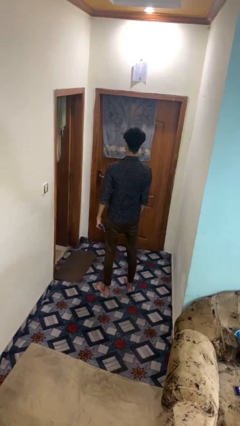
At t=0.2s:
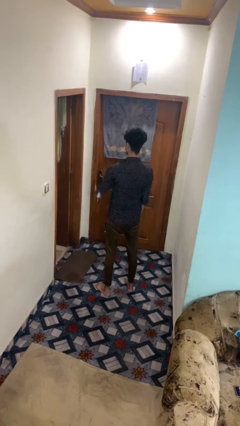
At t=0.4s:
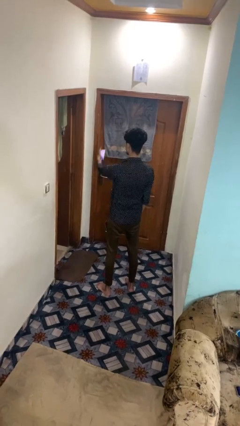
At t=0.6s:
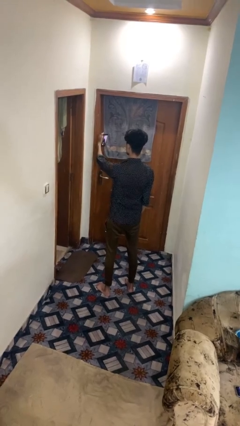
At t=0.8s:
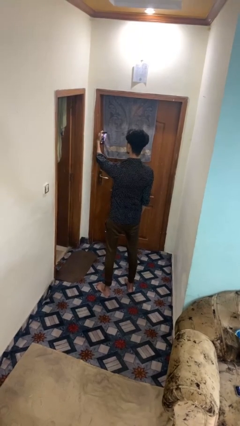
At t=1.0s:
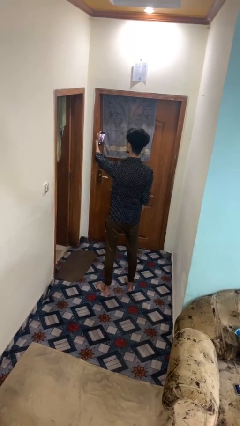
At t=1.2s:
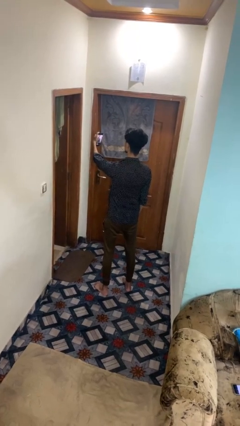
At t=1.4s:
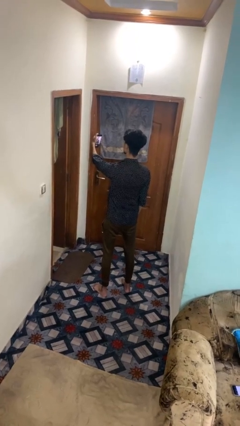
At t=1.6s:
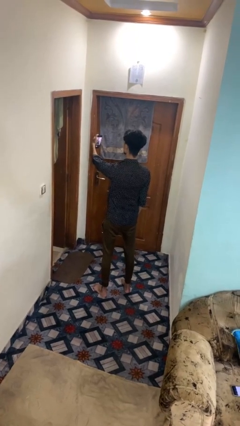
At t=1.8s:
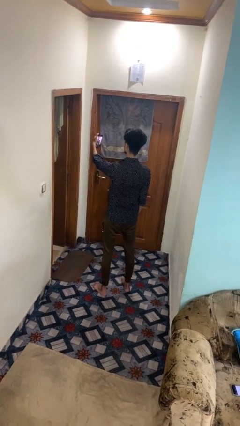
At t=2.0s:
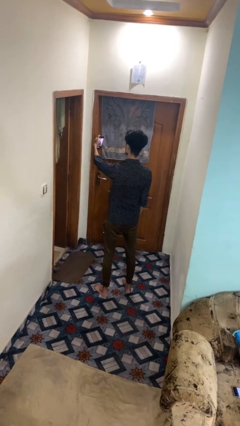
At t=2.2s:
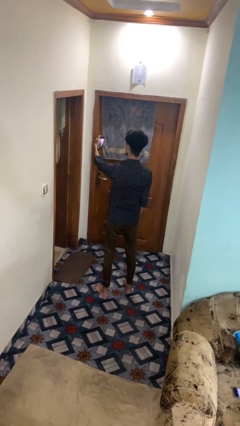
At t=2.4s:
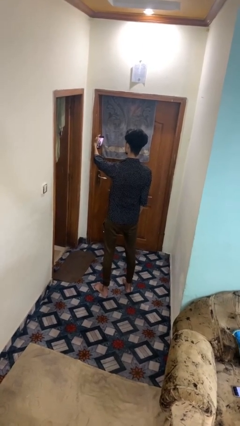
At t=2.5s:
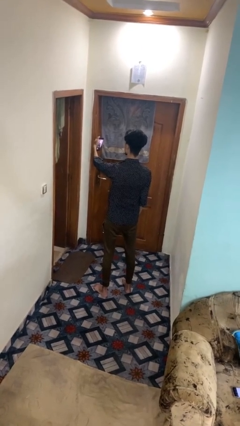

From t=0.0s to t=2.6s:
person takes selfie

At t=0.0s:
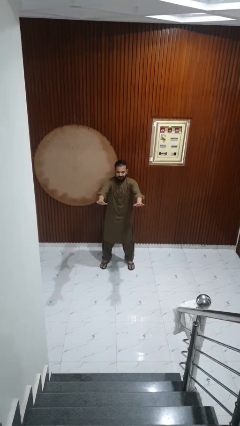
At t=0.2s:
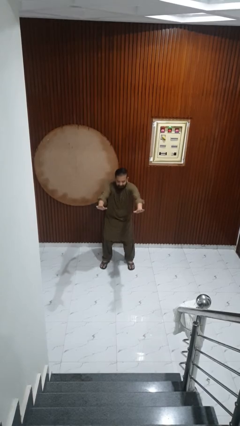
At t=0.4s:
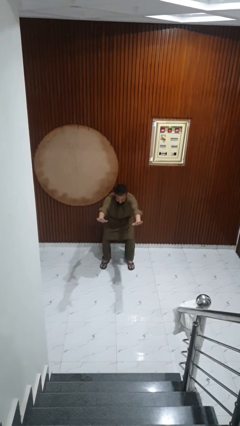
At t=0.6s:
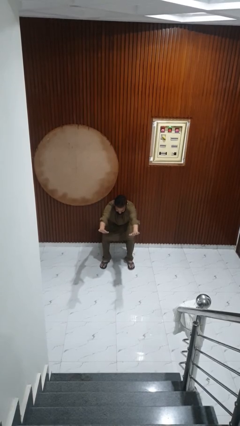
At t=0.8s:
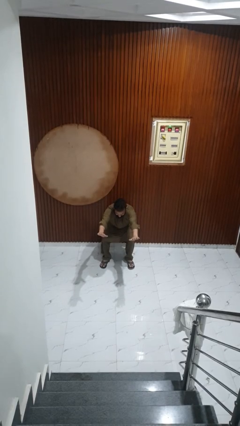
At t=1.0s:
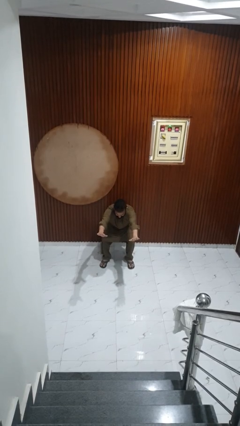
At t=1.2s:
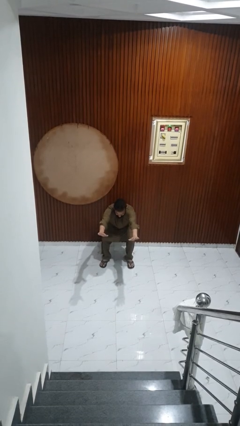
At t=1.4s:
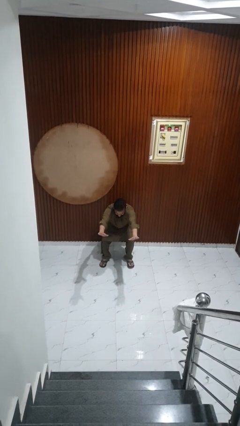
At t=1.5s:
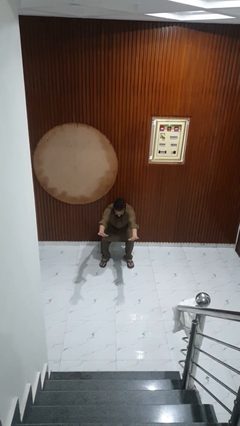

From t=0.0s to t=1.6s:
person squats

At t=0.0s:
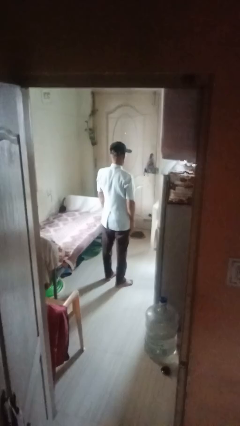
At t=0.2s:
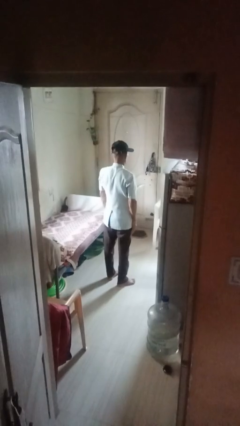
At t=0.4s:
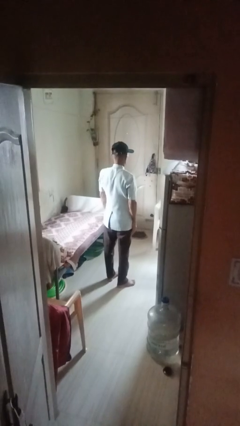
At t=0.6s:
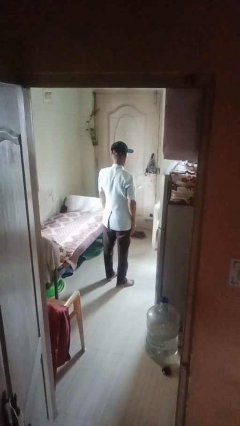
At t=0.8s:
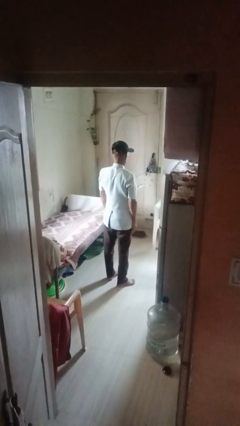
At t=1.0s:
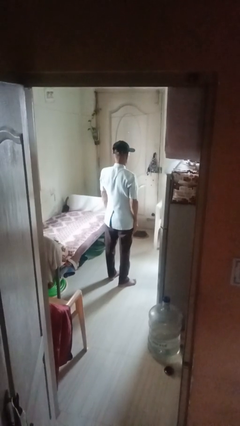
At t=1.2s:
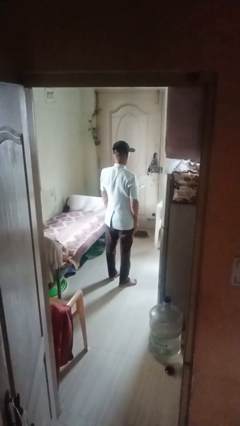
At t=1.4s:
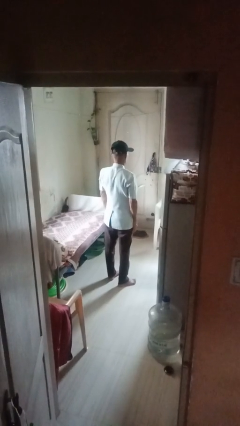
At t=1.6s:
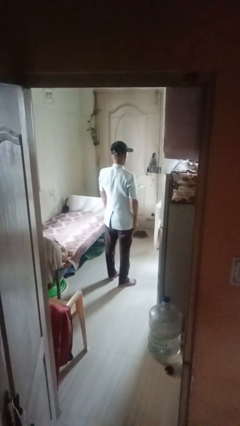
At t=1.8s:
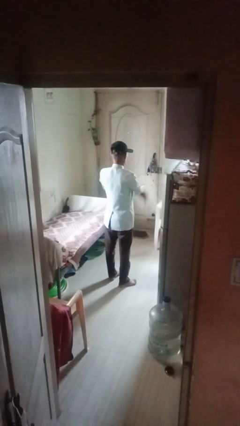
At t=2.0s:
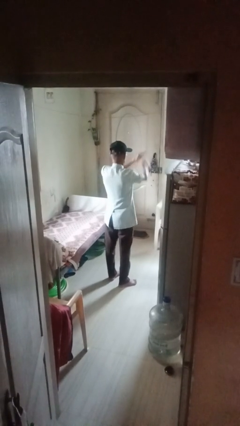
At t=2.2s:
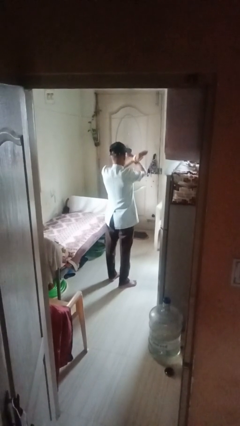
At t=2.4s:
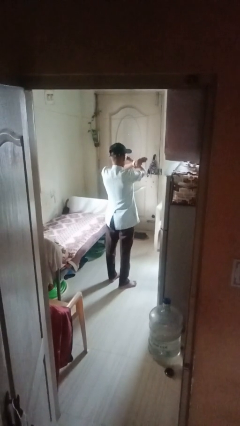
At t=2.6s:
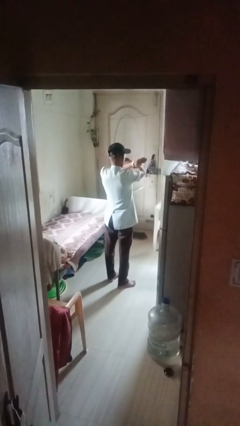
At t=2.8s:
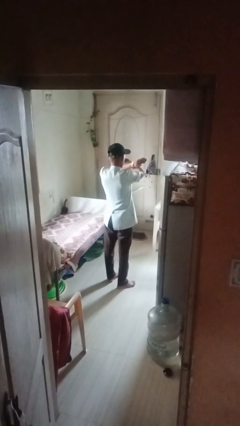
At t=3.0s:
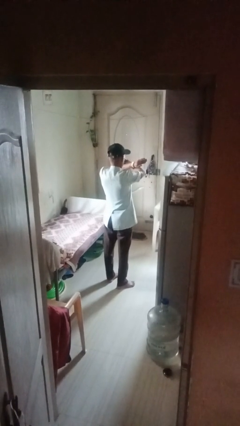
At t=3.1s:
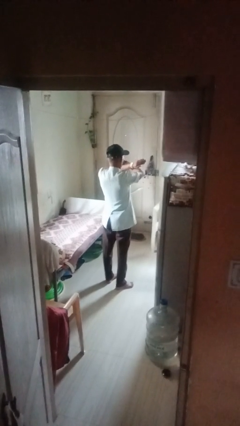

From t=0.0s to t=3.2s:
person gestures arms x

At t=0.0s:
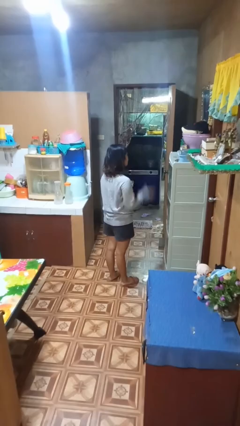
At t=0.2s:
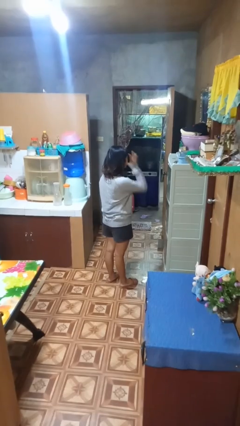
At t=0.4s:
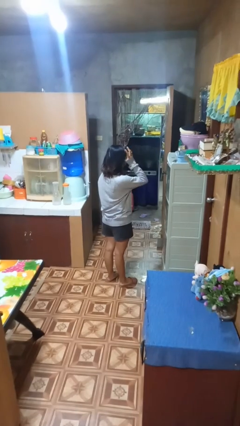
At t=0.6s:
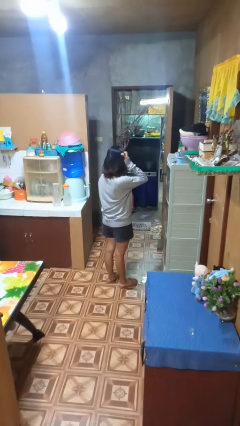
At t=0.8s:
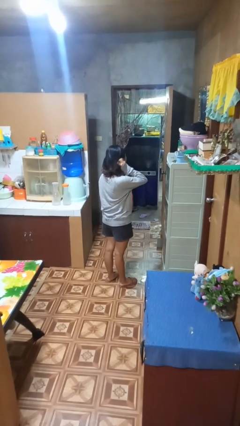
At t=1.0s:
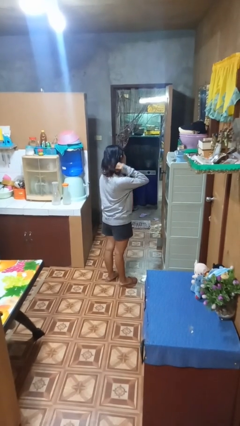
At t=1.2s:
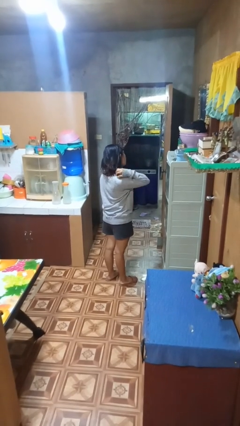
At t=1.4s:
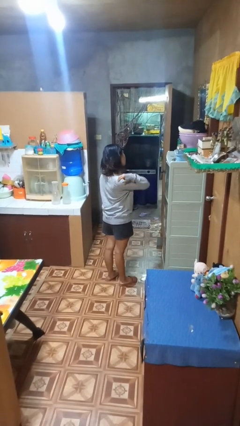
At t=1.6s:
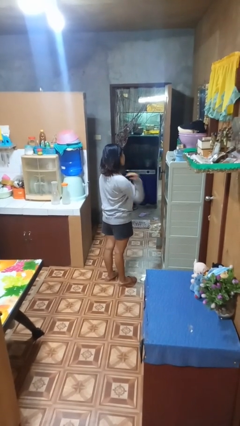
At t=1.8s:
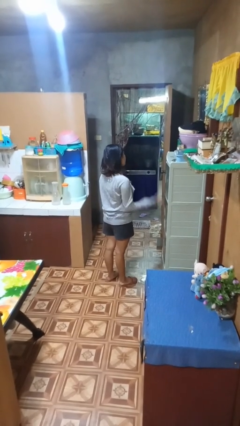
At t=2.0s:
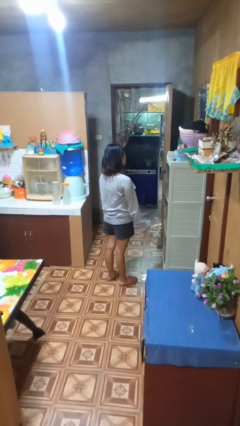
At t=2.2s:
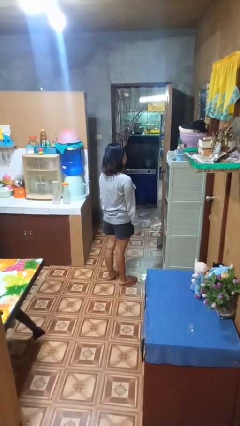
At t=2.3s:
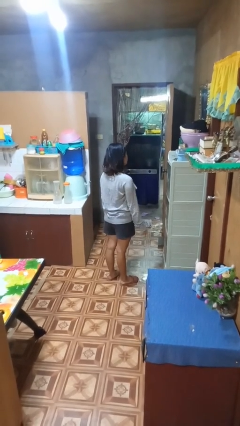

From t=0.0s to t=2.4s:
person strokes hair

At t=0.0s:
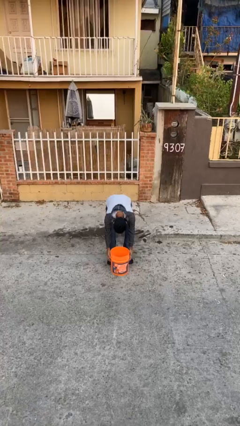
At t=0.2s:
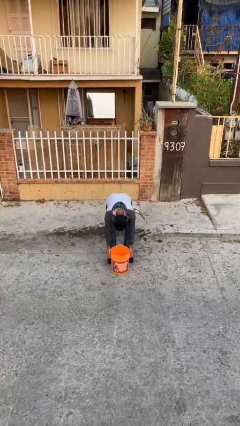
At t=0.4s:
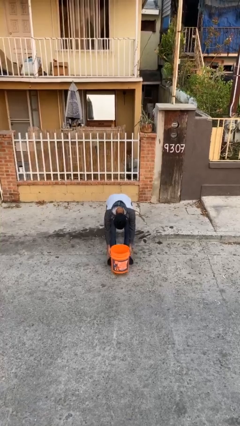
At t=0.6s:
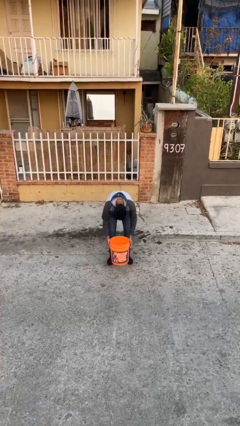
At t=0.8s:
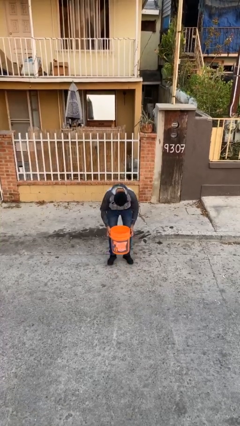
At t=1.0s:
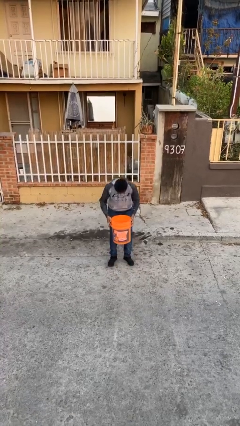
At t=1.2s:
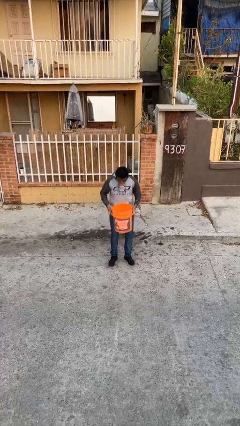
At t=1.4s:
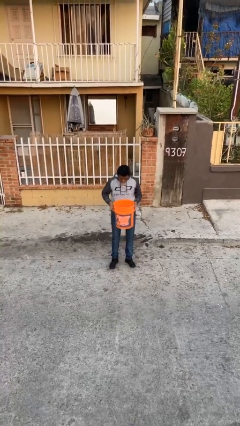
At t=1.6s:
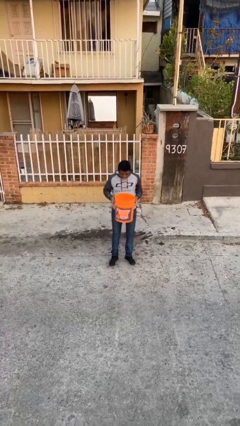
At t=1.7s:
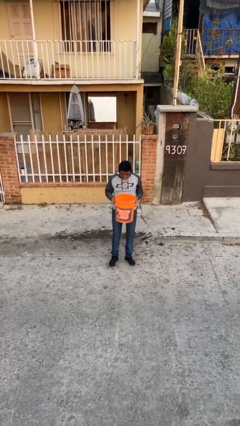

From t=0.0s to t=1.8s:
person picks up object from floor

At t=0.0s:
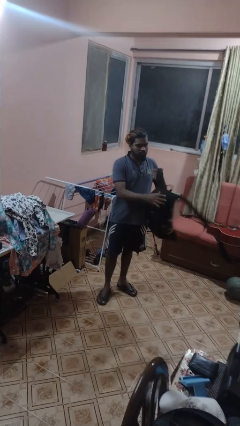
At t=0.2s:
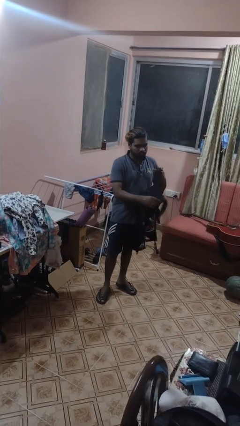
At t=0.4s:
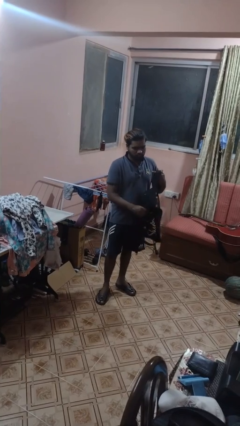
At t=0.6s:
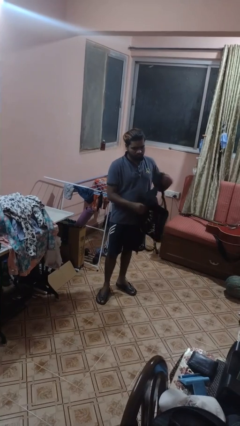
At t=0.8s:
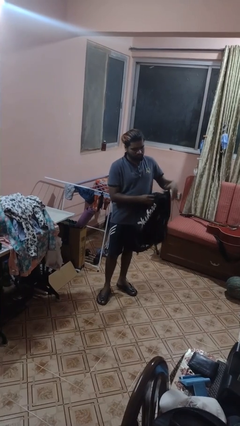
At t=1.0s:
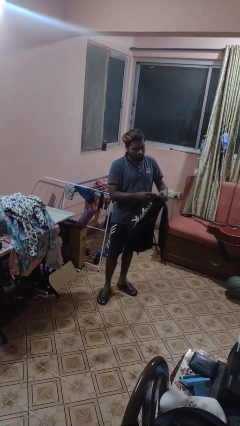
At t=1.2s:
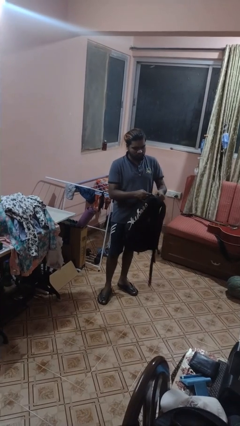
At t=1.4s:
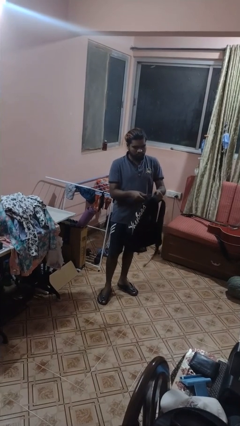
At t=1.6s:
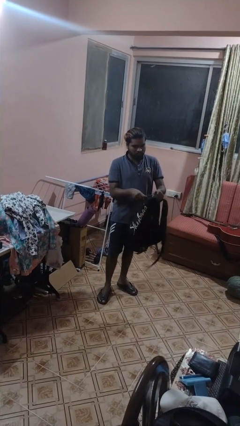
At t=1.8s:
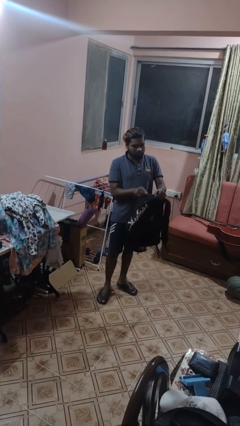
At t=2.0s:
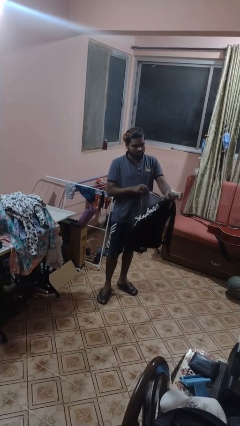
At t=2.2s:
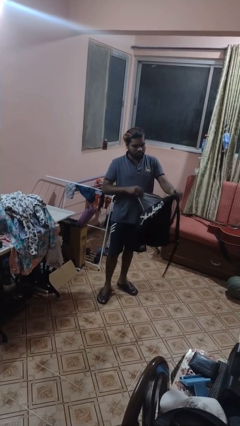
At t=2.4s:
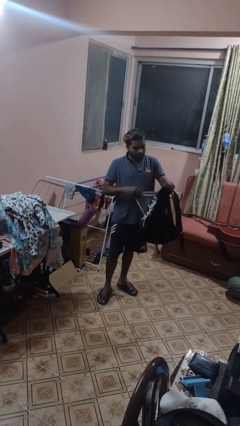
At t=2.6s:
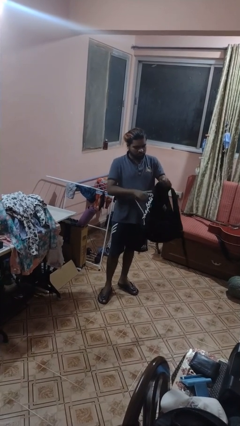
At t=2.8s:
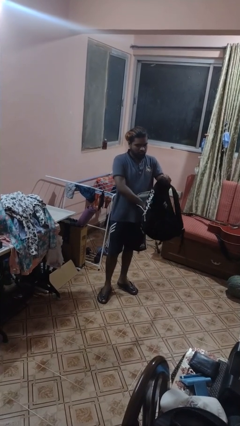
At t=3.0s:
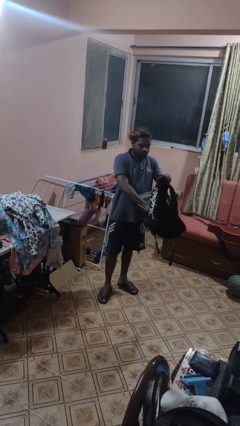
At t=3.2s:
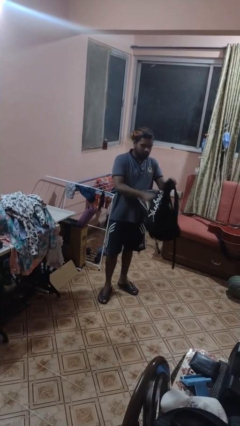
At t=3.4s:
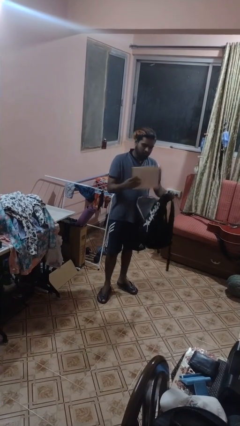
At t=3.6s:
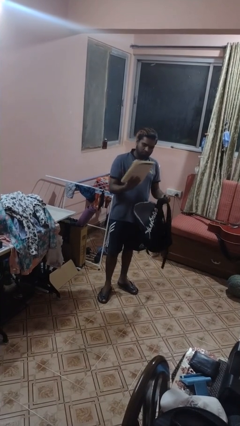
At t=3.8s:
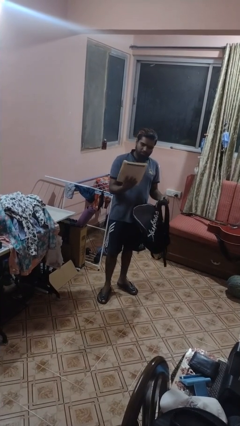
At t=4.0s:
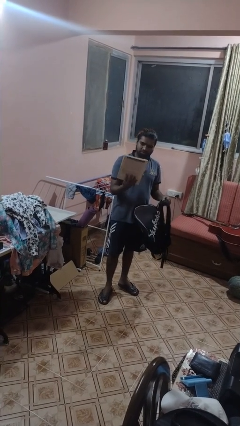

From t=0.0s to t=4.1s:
person searches in backpack

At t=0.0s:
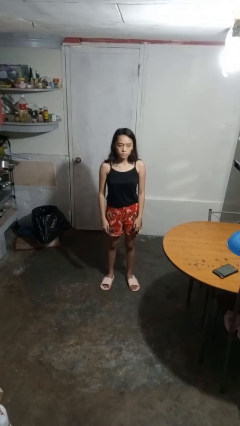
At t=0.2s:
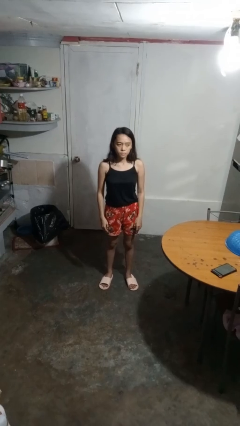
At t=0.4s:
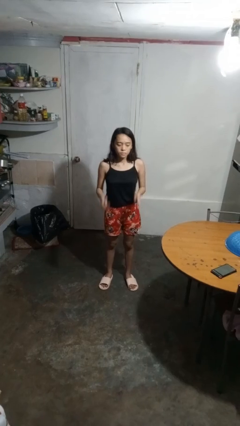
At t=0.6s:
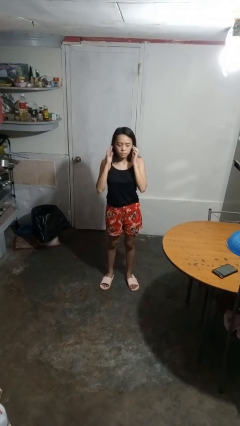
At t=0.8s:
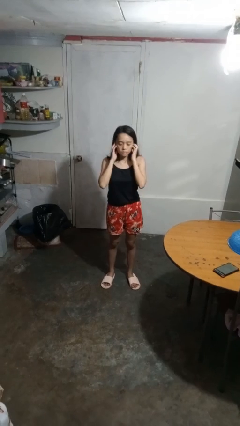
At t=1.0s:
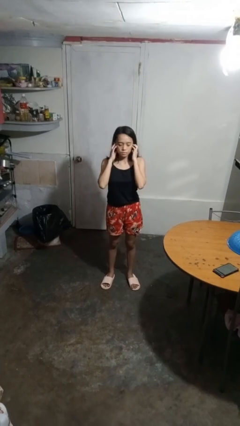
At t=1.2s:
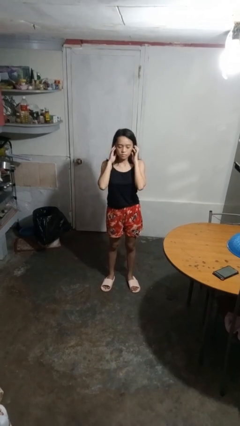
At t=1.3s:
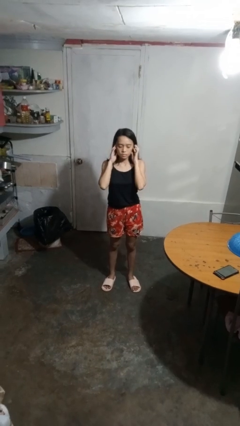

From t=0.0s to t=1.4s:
person puts fingers in ear

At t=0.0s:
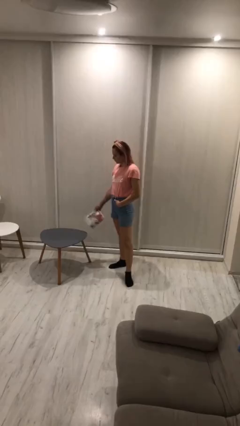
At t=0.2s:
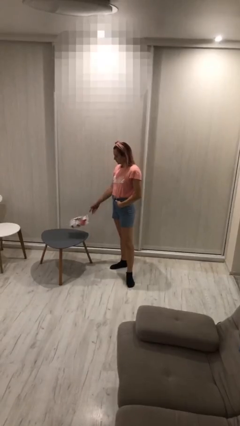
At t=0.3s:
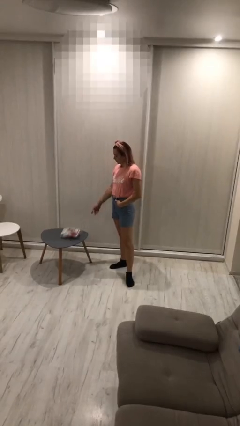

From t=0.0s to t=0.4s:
person throws object on table
